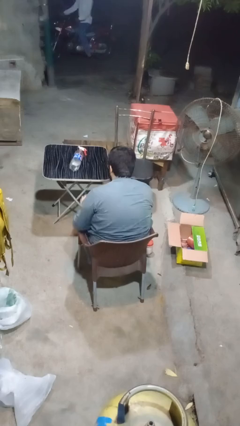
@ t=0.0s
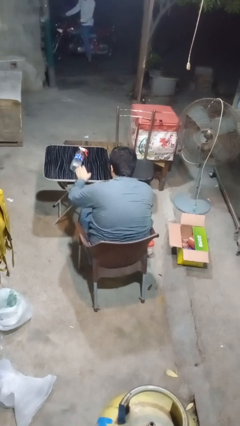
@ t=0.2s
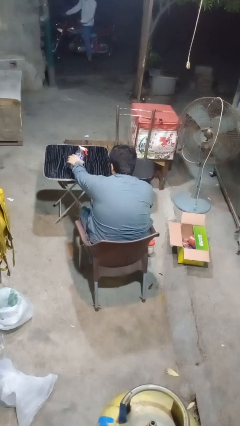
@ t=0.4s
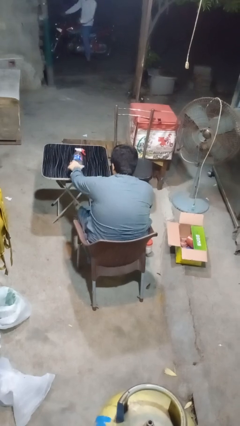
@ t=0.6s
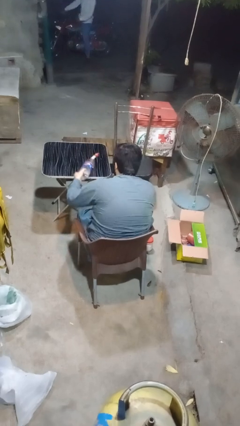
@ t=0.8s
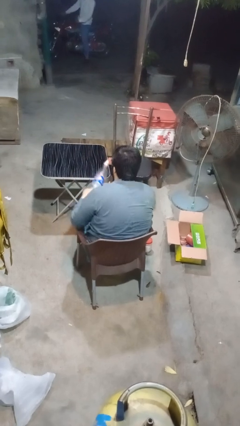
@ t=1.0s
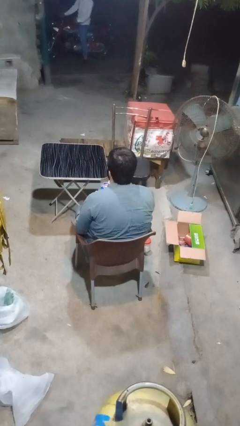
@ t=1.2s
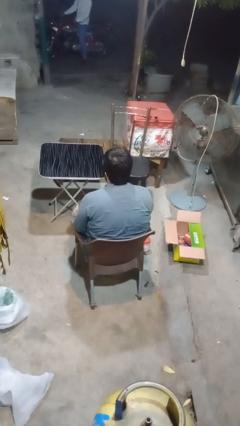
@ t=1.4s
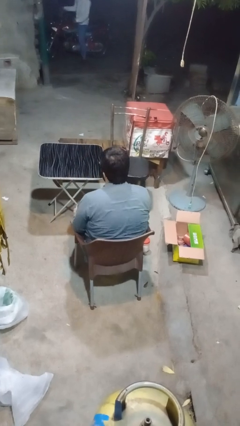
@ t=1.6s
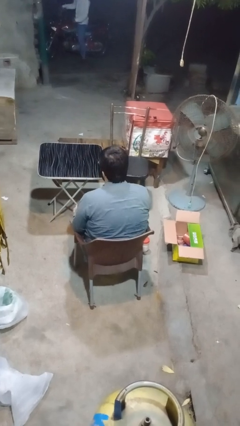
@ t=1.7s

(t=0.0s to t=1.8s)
person picks up object from table

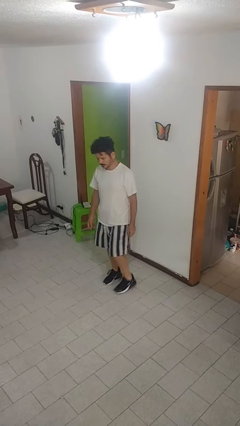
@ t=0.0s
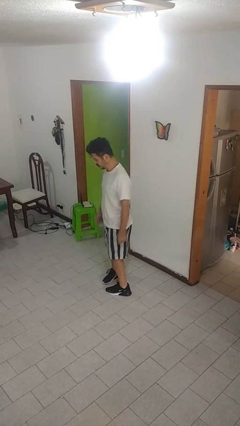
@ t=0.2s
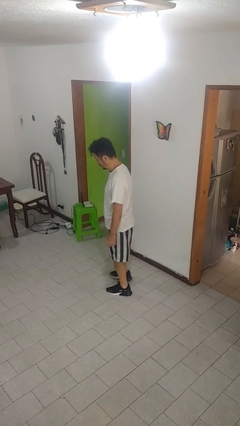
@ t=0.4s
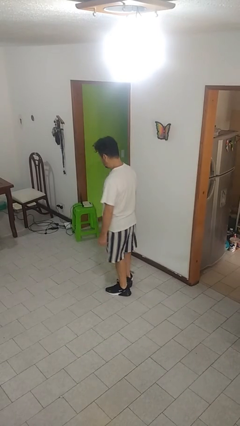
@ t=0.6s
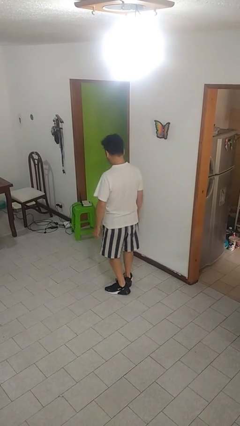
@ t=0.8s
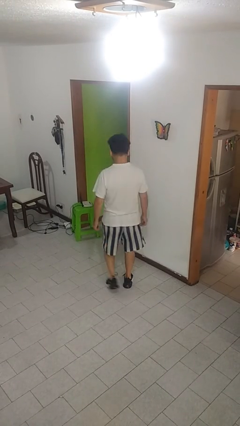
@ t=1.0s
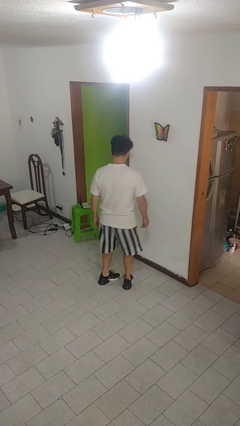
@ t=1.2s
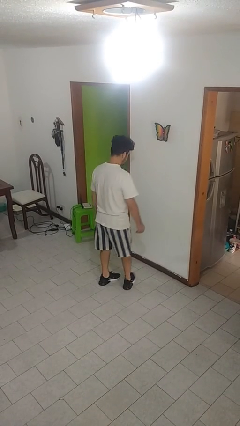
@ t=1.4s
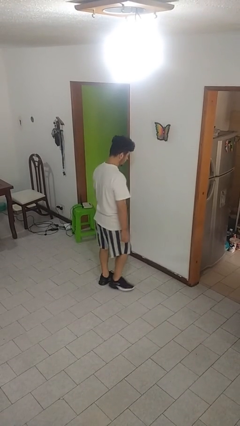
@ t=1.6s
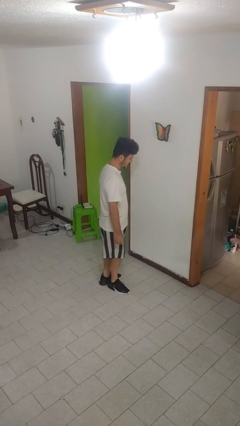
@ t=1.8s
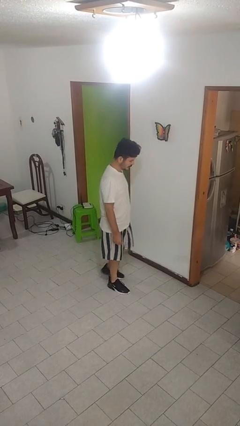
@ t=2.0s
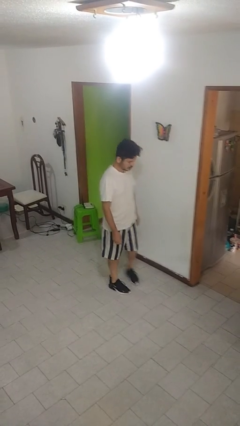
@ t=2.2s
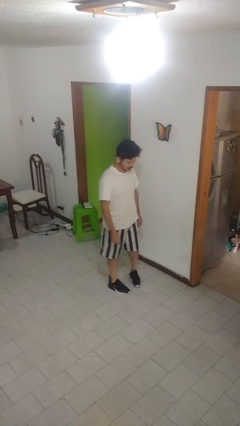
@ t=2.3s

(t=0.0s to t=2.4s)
person twirls

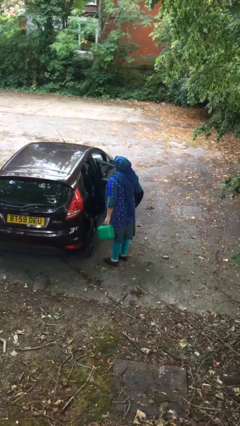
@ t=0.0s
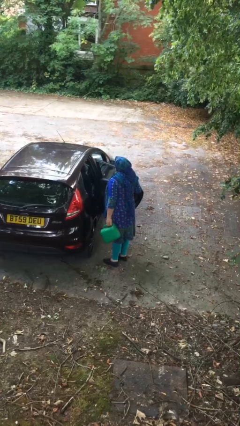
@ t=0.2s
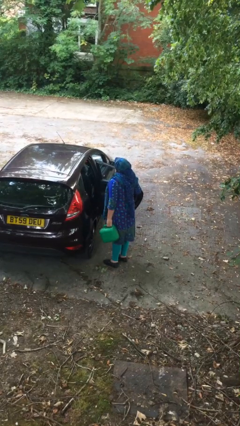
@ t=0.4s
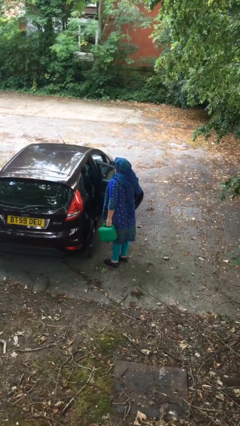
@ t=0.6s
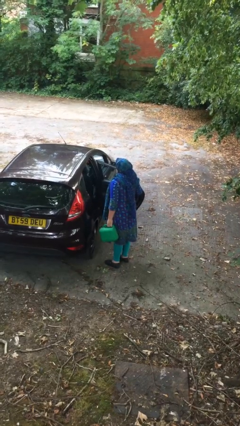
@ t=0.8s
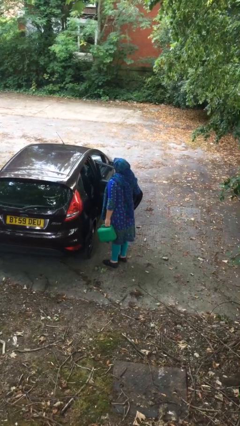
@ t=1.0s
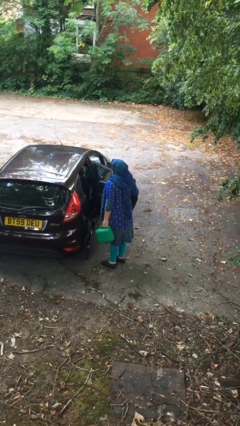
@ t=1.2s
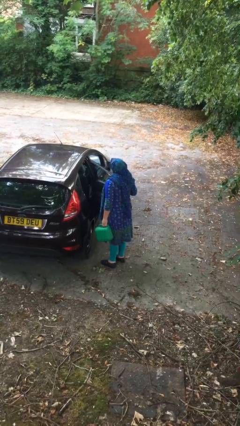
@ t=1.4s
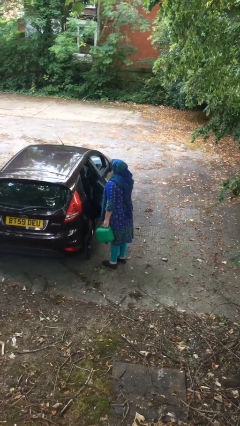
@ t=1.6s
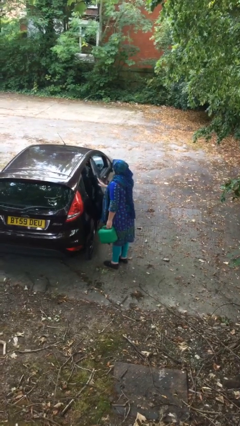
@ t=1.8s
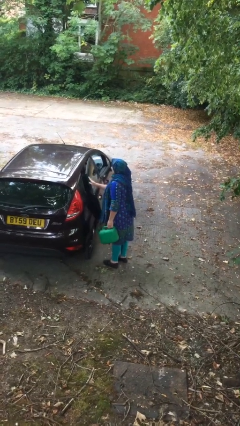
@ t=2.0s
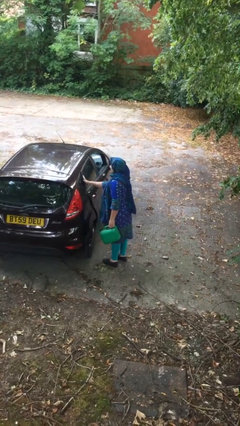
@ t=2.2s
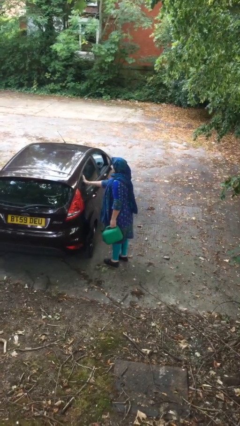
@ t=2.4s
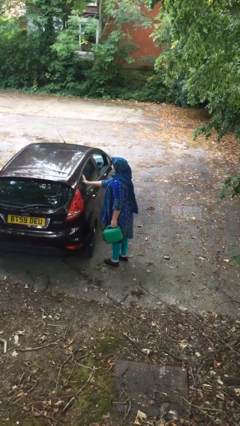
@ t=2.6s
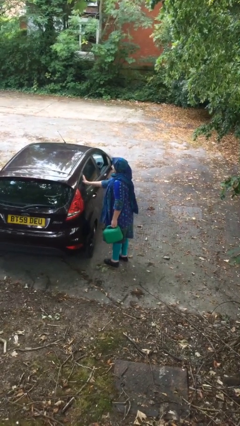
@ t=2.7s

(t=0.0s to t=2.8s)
person closes car door

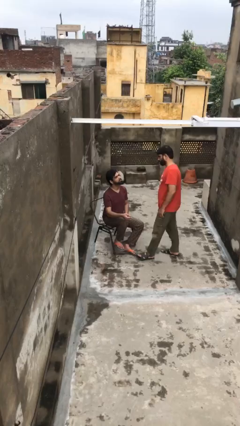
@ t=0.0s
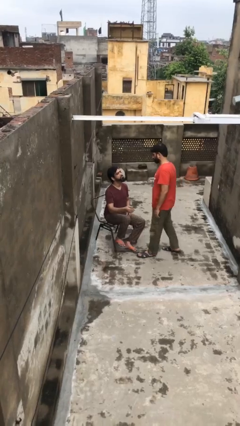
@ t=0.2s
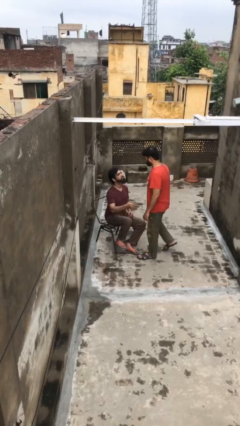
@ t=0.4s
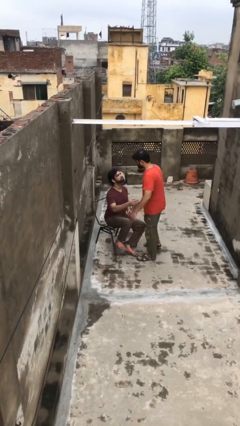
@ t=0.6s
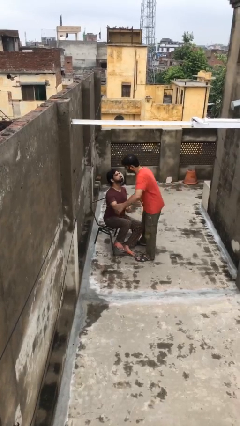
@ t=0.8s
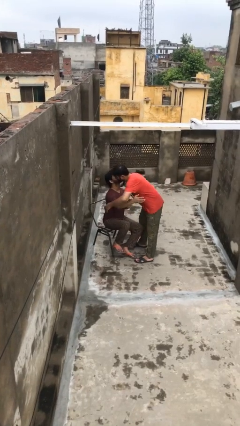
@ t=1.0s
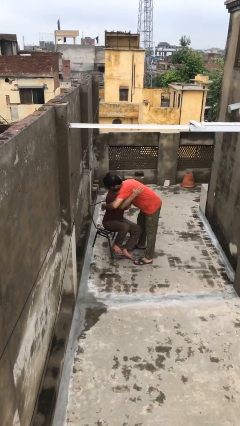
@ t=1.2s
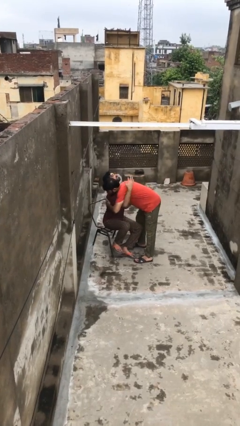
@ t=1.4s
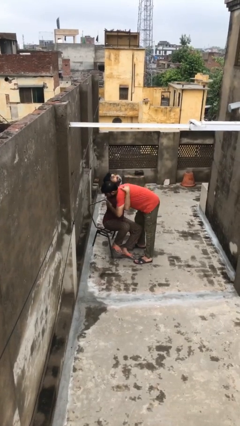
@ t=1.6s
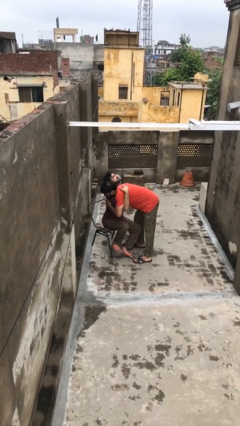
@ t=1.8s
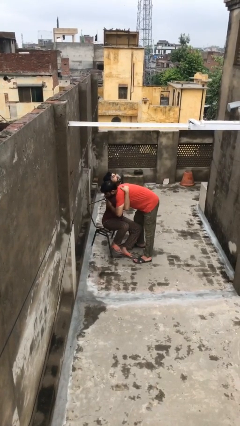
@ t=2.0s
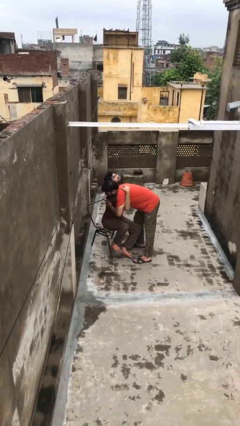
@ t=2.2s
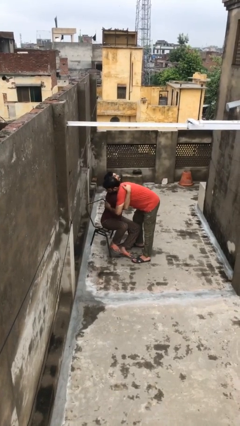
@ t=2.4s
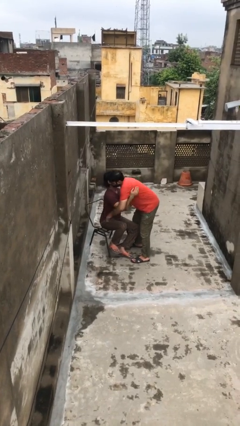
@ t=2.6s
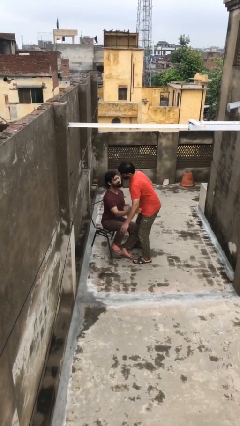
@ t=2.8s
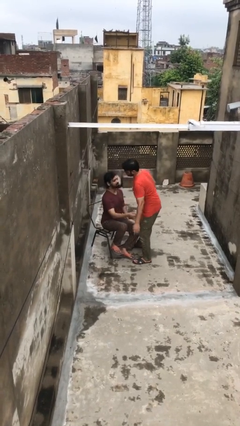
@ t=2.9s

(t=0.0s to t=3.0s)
person embraces person

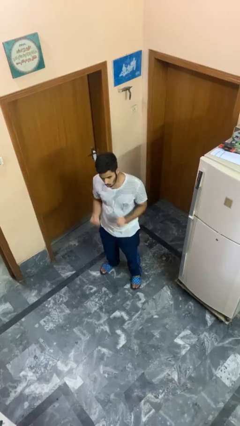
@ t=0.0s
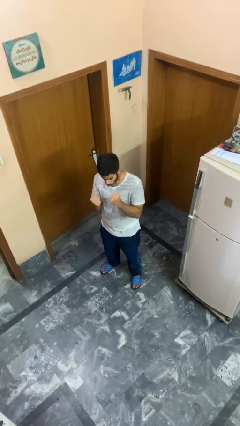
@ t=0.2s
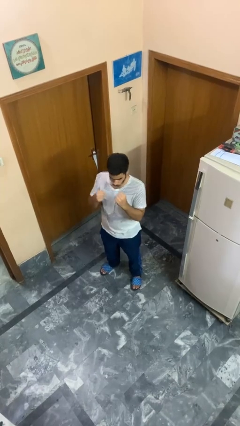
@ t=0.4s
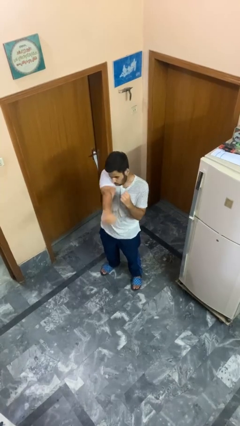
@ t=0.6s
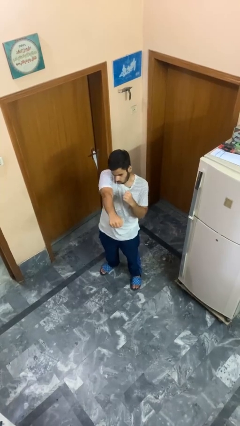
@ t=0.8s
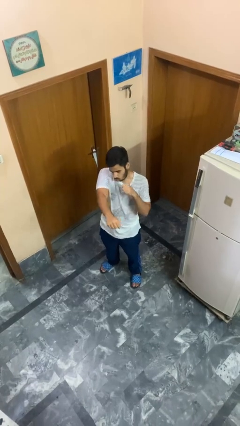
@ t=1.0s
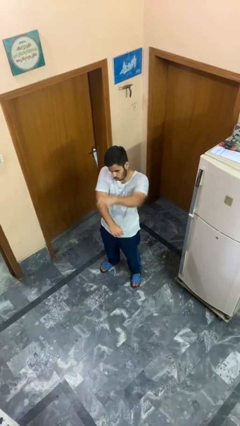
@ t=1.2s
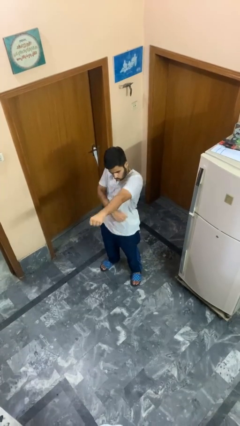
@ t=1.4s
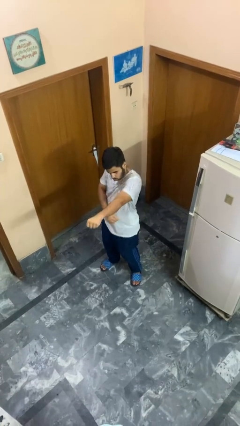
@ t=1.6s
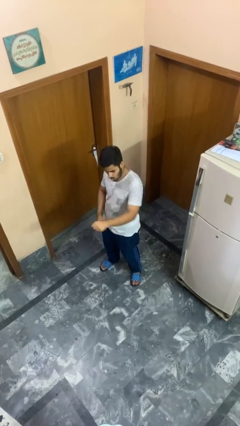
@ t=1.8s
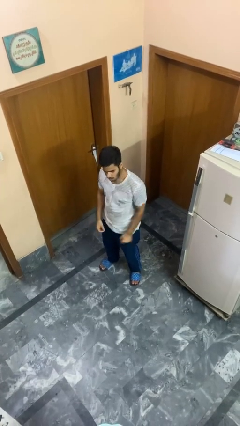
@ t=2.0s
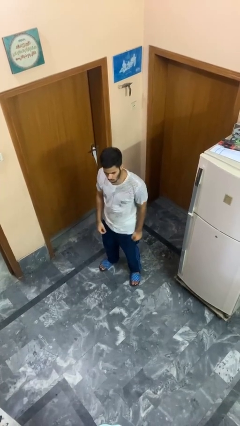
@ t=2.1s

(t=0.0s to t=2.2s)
person punches

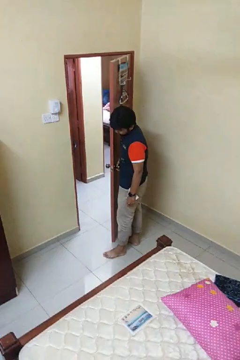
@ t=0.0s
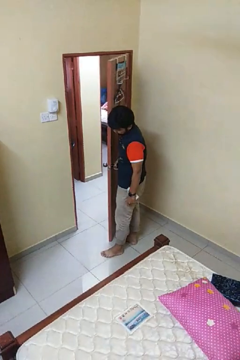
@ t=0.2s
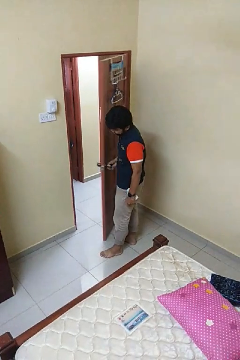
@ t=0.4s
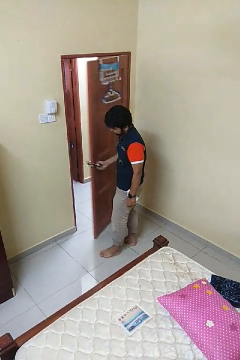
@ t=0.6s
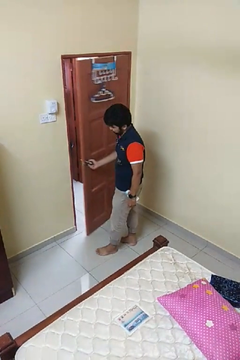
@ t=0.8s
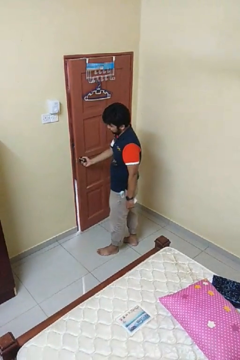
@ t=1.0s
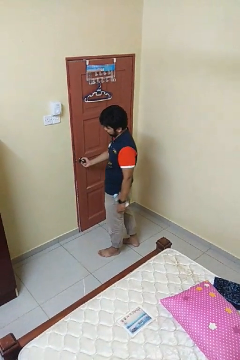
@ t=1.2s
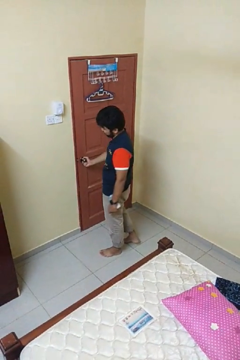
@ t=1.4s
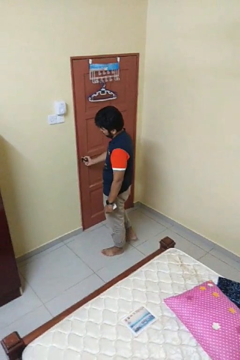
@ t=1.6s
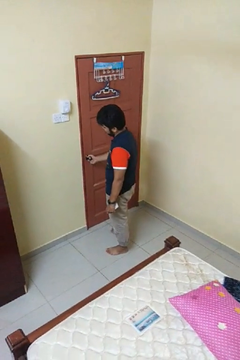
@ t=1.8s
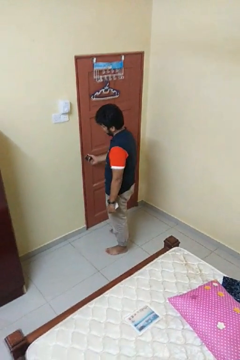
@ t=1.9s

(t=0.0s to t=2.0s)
person closes facility door

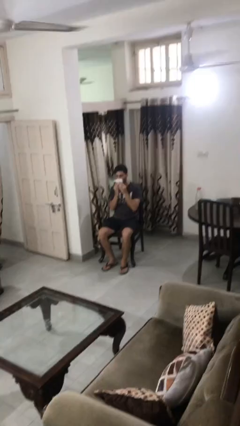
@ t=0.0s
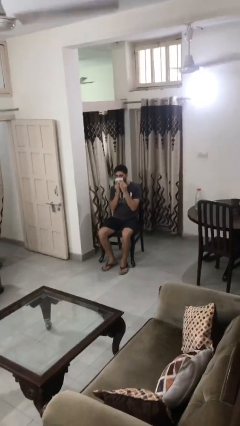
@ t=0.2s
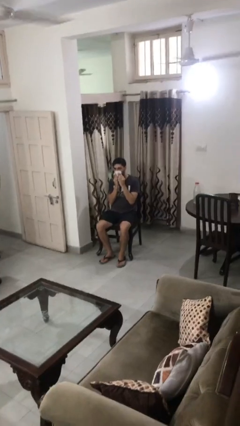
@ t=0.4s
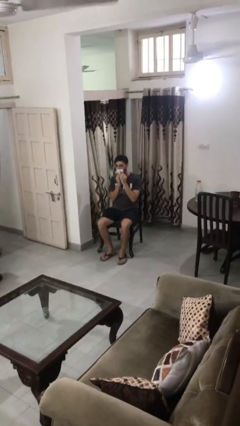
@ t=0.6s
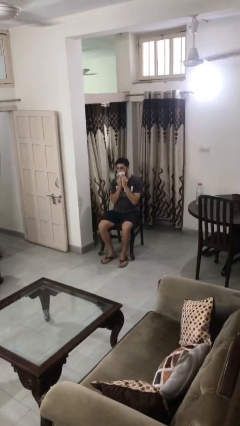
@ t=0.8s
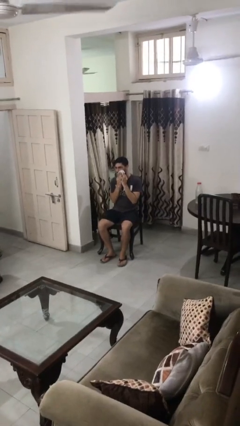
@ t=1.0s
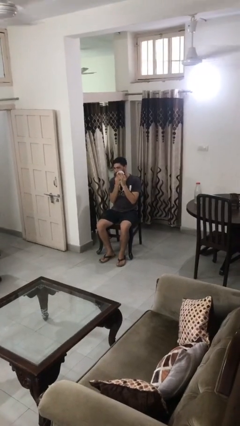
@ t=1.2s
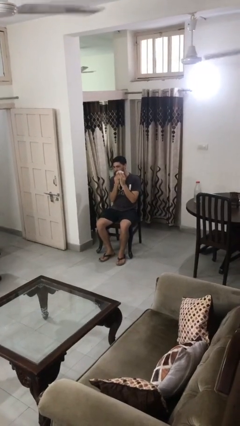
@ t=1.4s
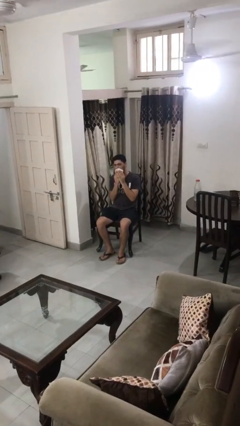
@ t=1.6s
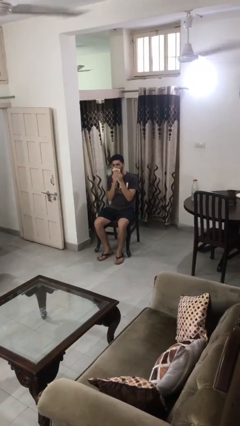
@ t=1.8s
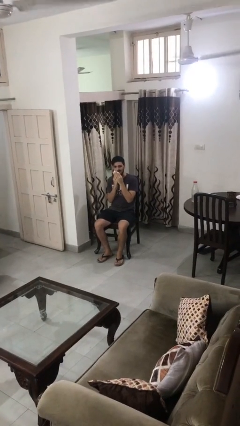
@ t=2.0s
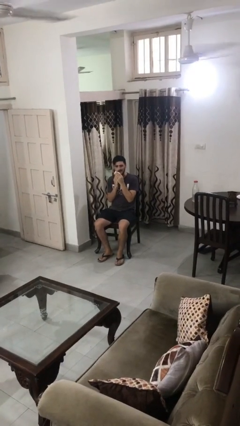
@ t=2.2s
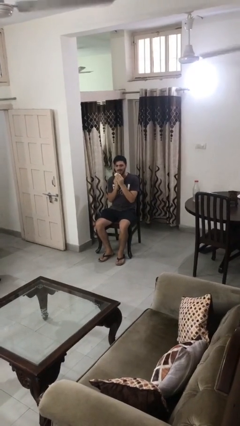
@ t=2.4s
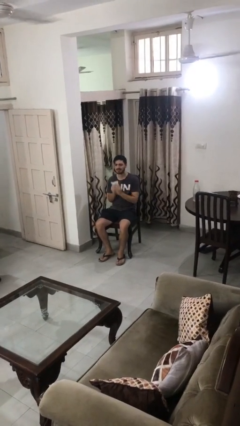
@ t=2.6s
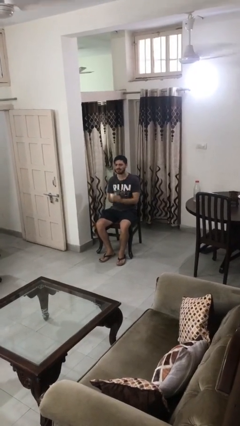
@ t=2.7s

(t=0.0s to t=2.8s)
person wipes mouth with napkin

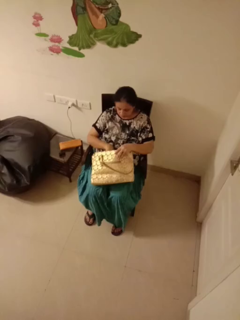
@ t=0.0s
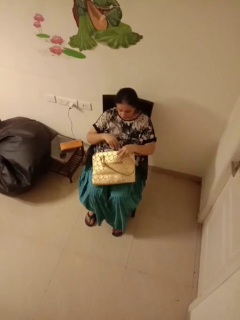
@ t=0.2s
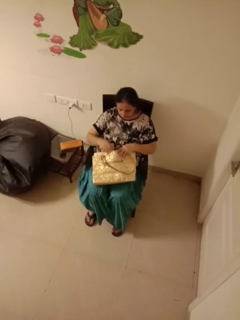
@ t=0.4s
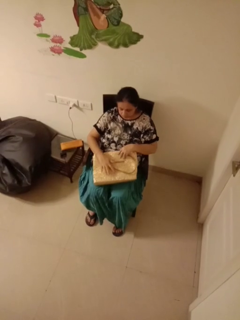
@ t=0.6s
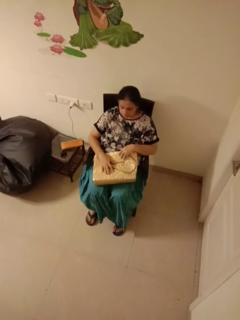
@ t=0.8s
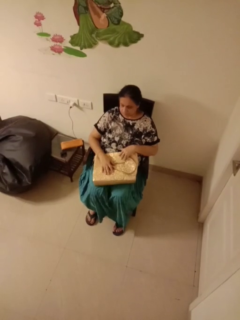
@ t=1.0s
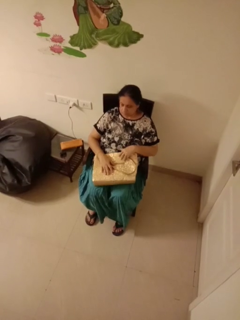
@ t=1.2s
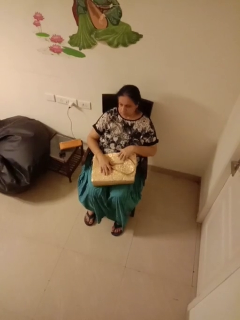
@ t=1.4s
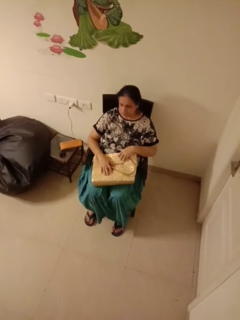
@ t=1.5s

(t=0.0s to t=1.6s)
person puts object into purse
